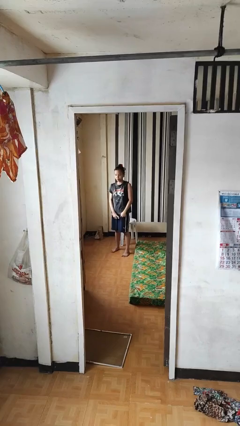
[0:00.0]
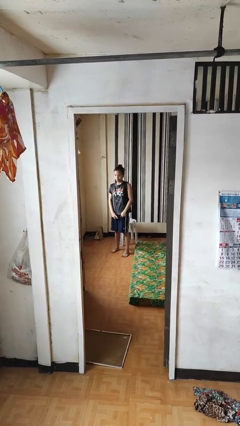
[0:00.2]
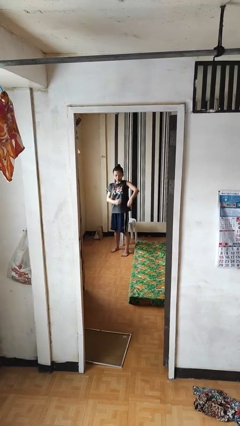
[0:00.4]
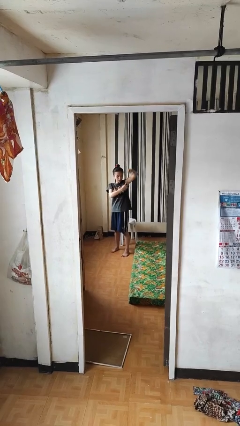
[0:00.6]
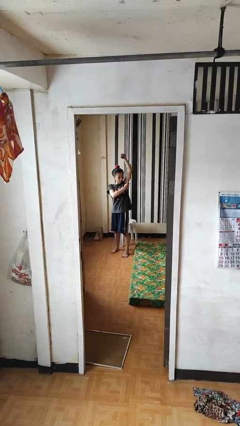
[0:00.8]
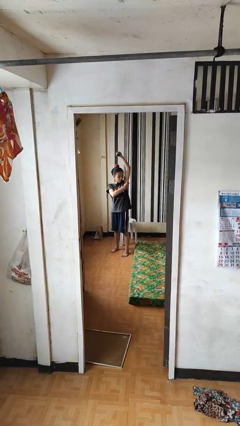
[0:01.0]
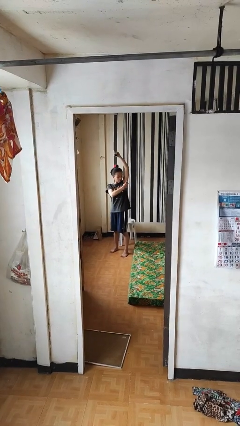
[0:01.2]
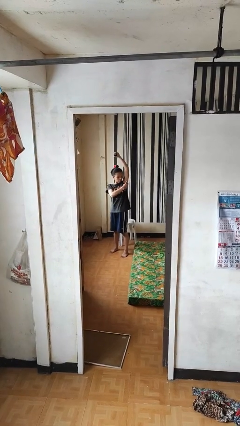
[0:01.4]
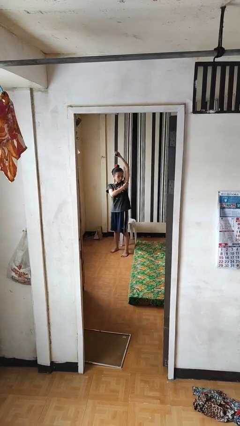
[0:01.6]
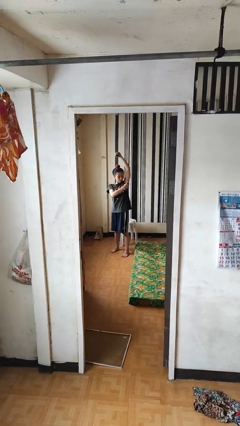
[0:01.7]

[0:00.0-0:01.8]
person applies deodorant

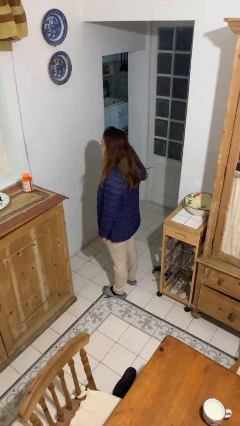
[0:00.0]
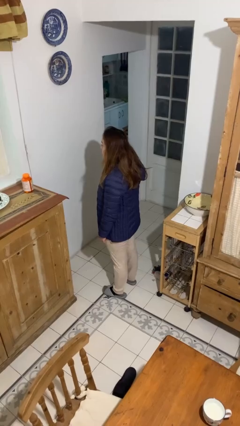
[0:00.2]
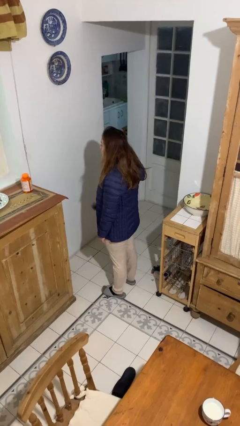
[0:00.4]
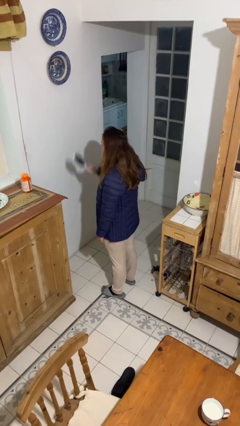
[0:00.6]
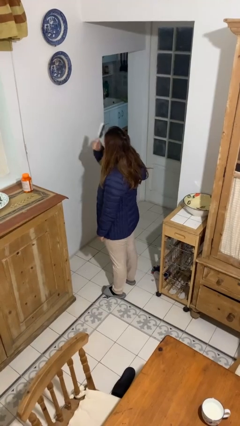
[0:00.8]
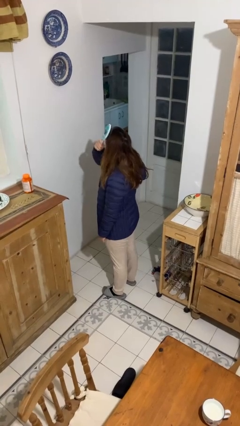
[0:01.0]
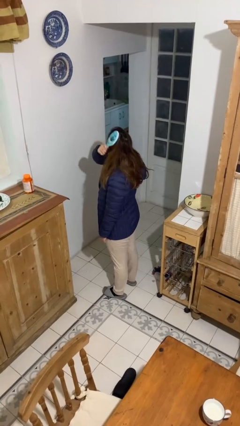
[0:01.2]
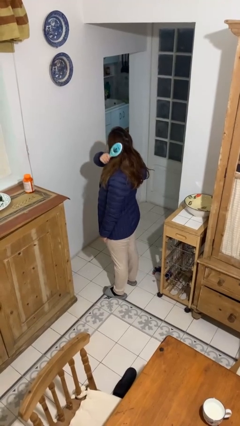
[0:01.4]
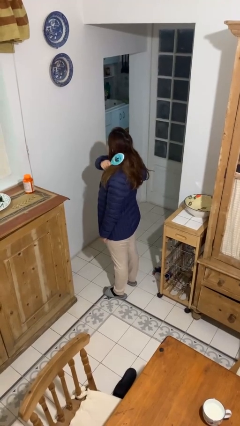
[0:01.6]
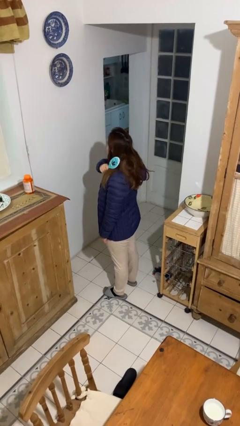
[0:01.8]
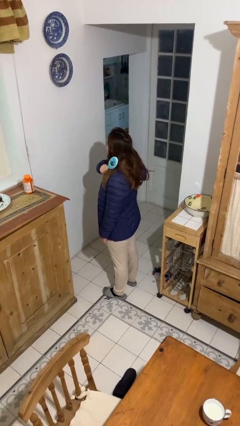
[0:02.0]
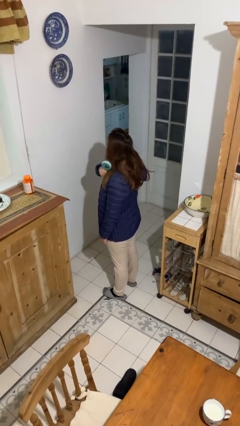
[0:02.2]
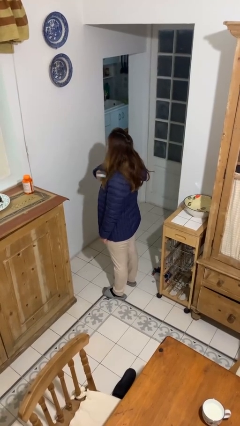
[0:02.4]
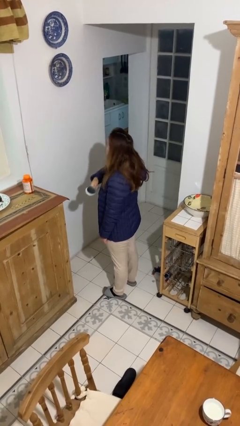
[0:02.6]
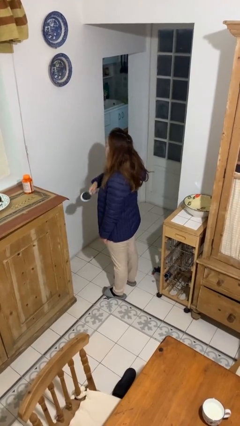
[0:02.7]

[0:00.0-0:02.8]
person brushes hair

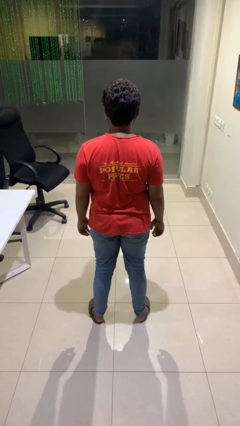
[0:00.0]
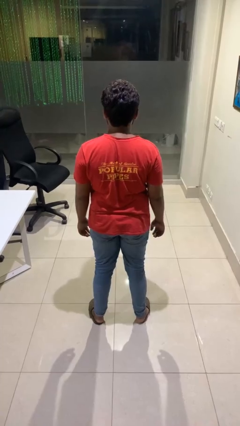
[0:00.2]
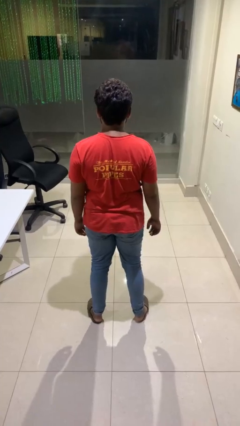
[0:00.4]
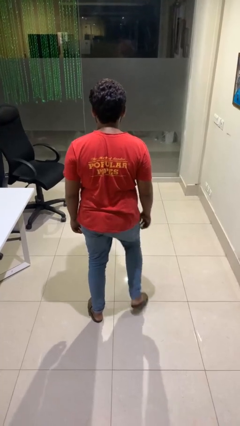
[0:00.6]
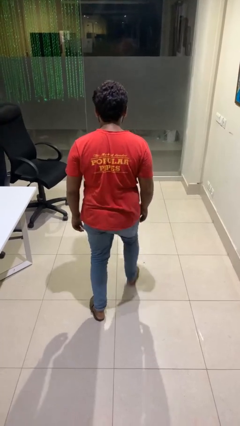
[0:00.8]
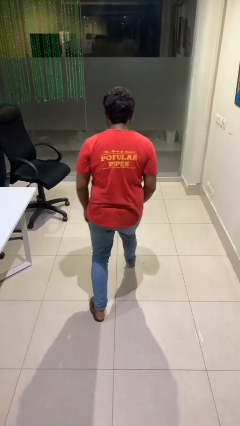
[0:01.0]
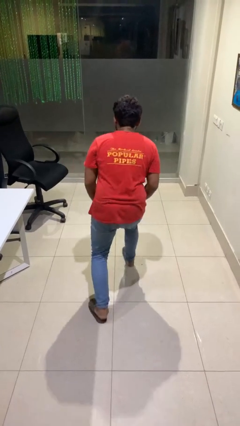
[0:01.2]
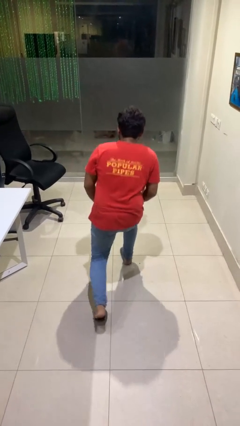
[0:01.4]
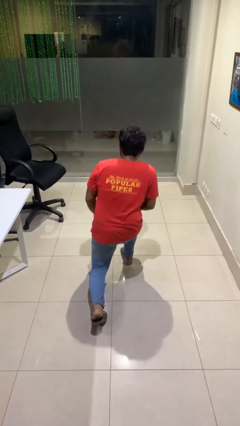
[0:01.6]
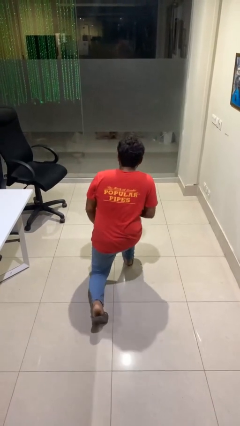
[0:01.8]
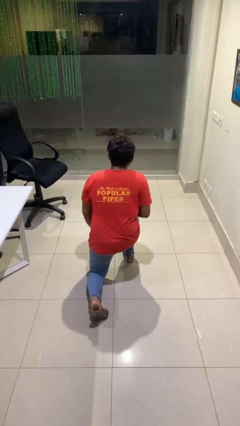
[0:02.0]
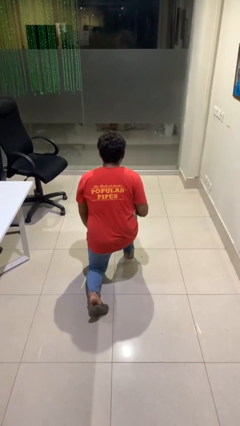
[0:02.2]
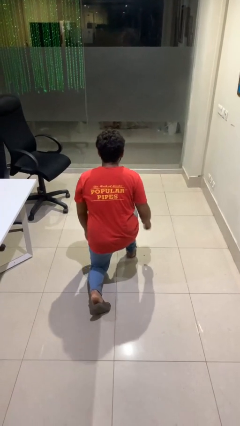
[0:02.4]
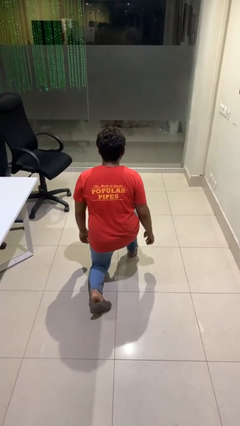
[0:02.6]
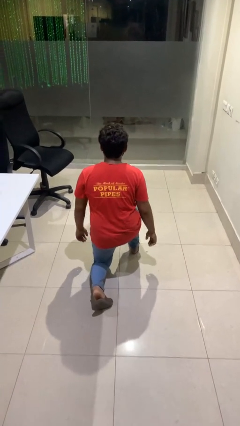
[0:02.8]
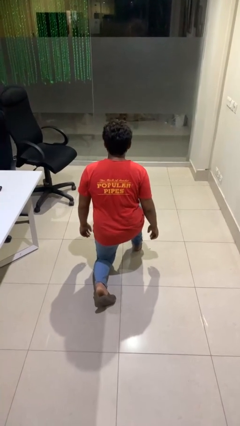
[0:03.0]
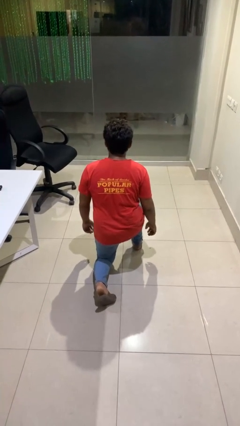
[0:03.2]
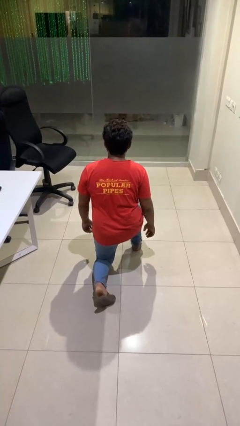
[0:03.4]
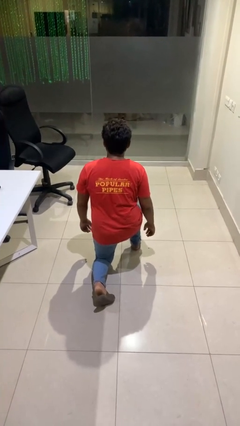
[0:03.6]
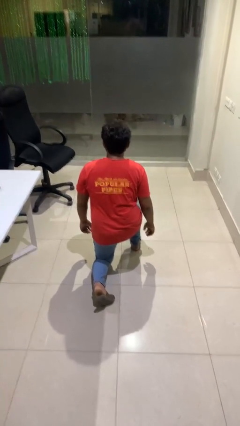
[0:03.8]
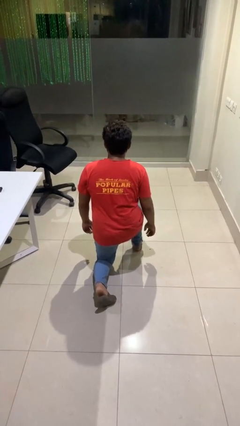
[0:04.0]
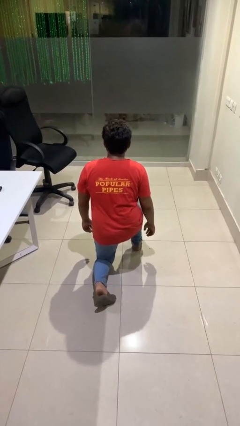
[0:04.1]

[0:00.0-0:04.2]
person kneels

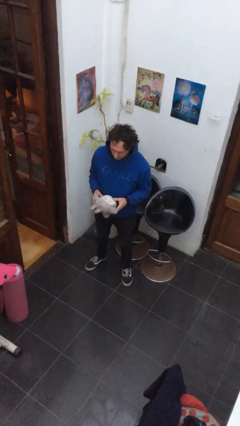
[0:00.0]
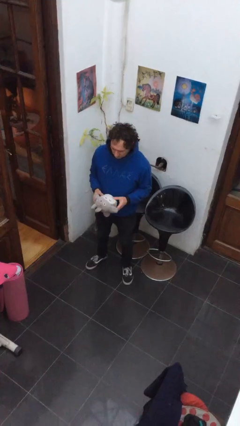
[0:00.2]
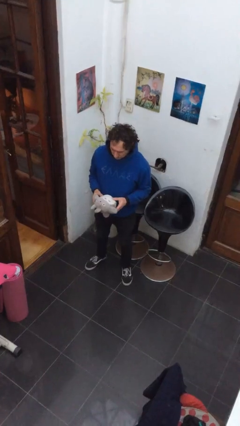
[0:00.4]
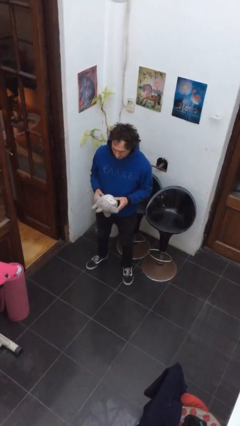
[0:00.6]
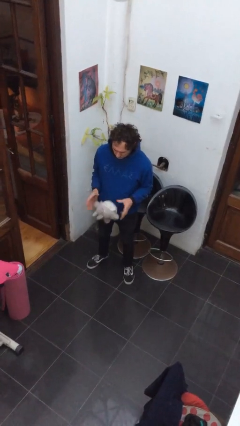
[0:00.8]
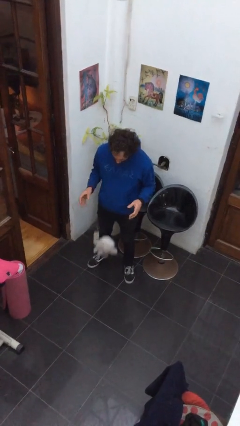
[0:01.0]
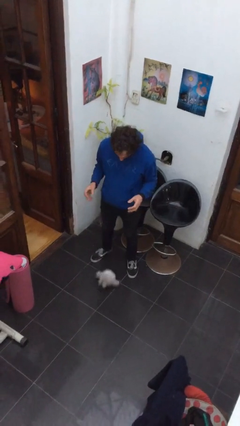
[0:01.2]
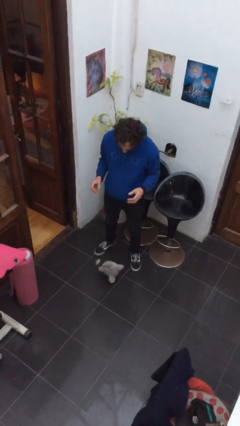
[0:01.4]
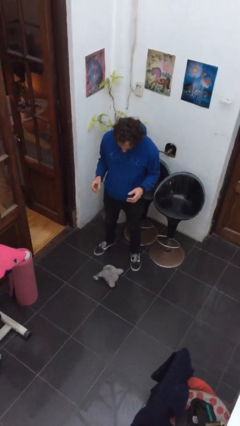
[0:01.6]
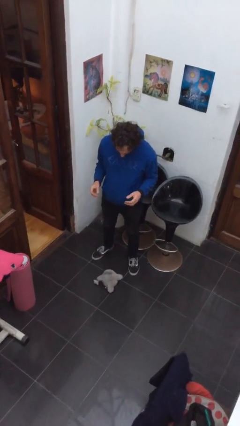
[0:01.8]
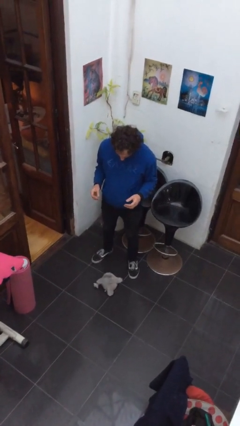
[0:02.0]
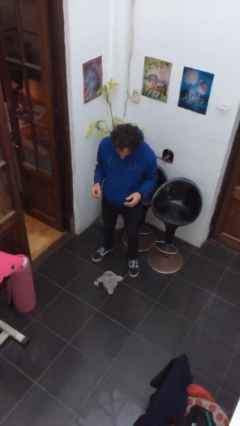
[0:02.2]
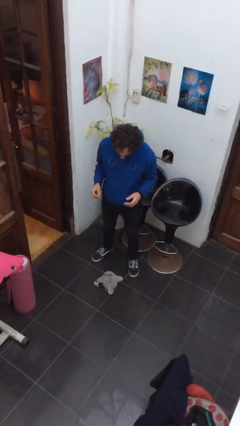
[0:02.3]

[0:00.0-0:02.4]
person drops object

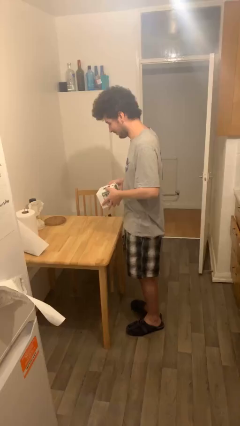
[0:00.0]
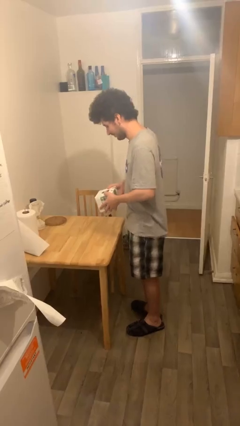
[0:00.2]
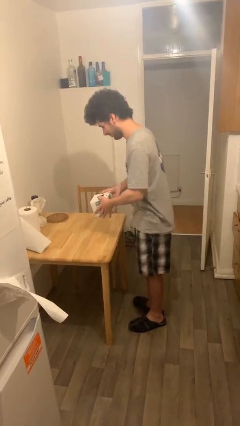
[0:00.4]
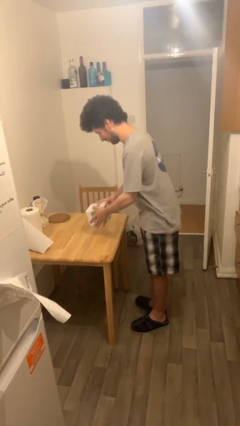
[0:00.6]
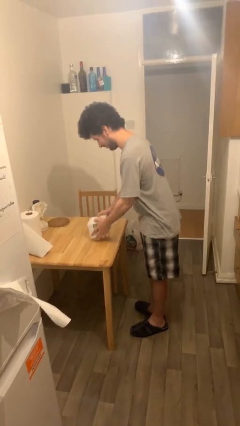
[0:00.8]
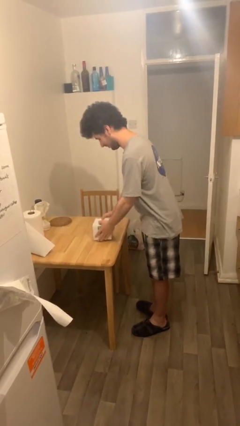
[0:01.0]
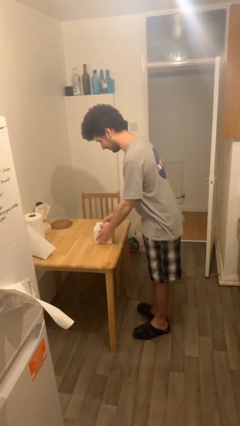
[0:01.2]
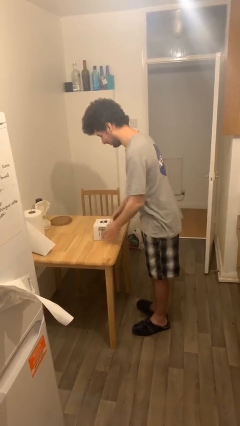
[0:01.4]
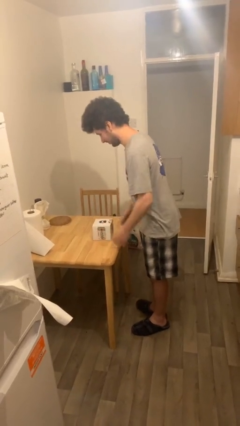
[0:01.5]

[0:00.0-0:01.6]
person puts down object on table

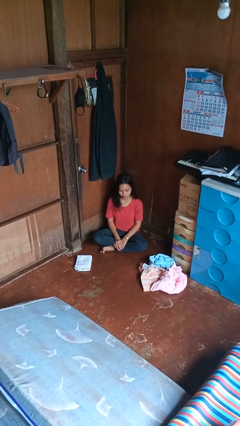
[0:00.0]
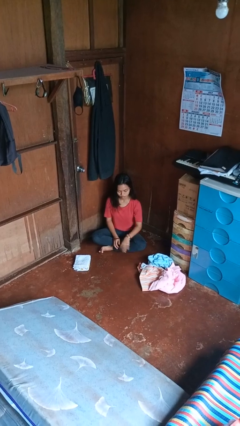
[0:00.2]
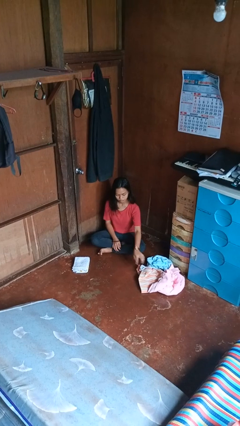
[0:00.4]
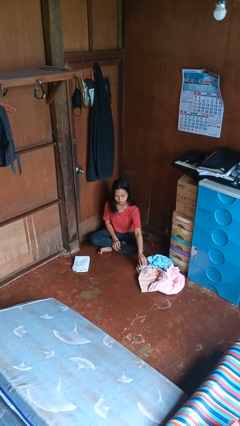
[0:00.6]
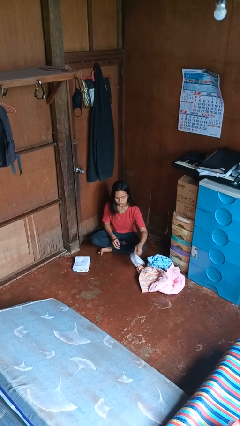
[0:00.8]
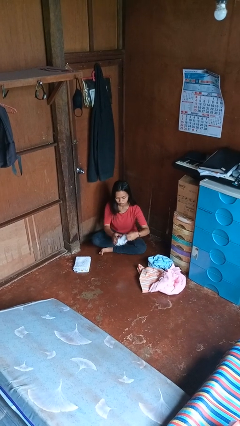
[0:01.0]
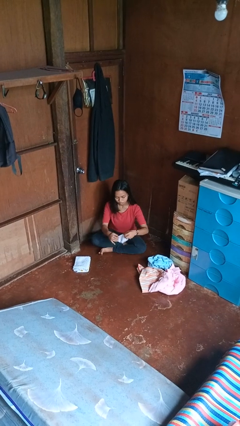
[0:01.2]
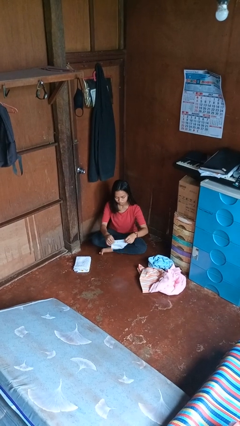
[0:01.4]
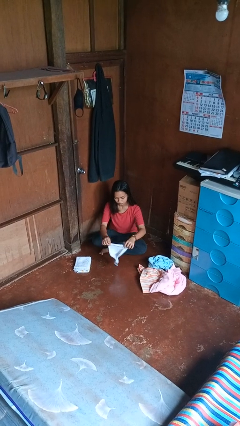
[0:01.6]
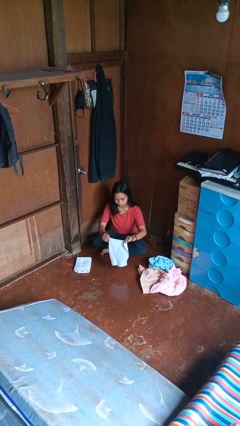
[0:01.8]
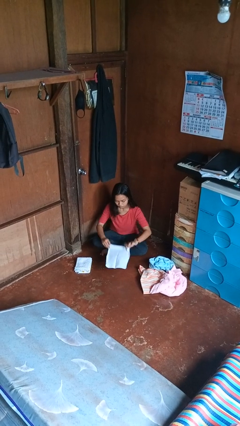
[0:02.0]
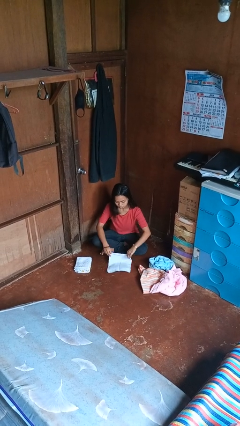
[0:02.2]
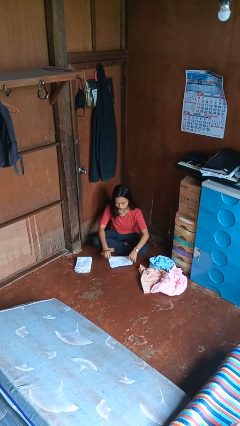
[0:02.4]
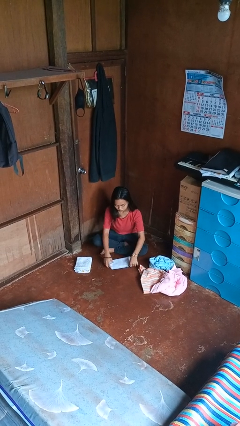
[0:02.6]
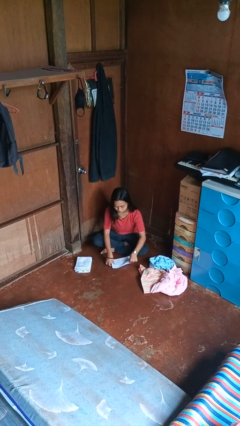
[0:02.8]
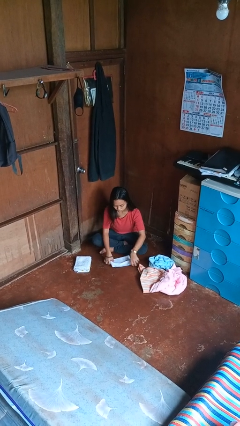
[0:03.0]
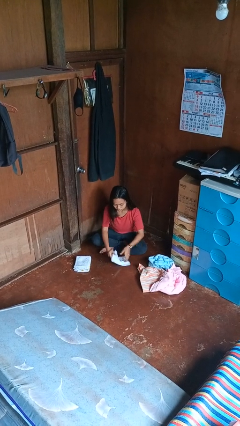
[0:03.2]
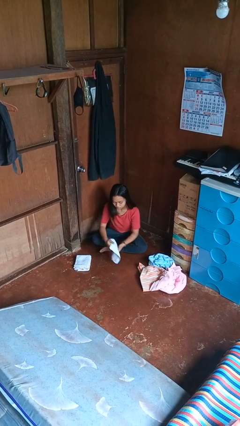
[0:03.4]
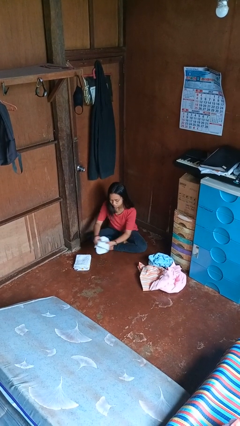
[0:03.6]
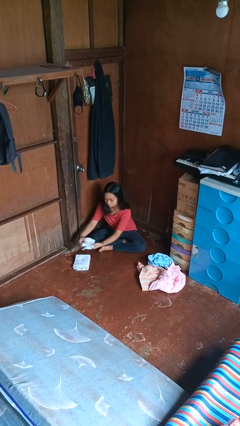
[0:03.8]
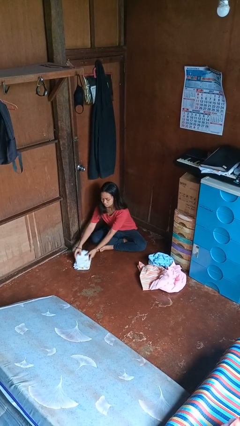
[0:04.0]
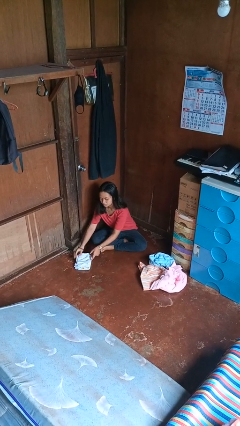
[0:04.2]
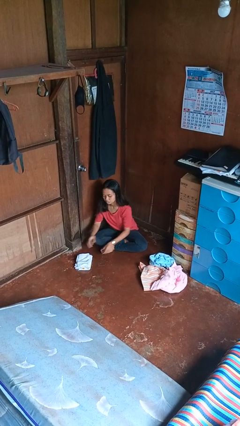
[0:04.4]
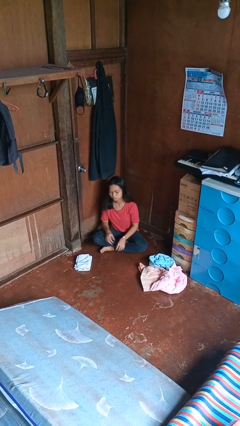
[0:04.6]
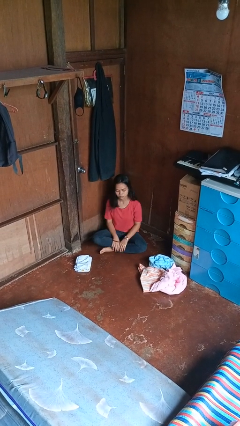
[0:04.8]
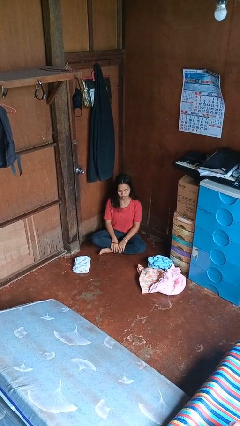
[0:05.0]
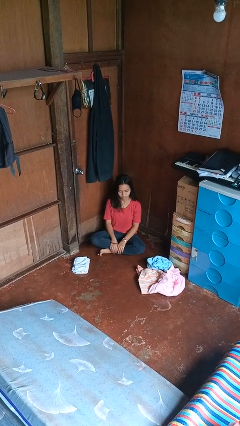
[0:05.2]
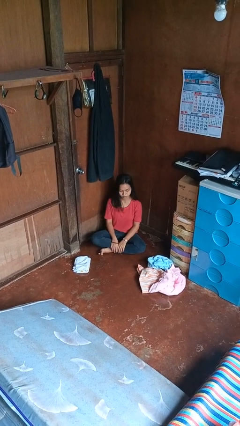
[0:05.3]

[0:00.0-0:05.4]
person folds towel
